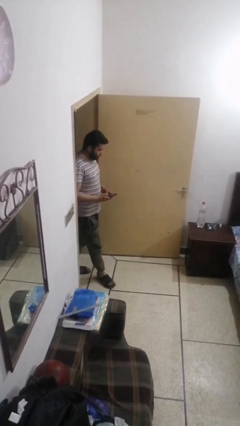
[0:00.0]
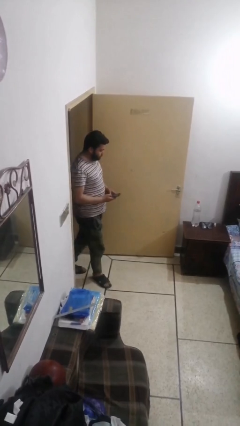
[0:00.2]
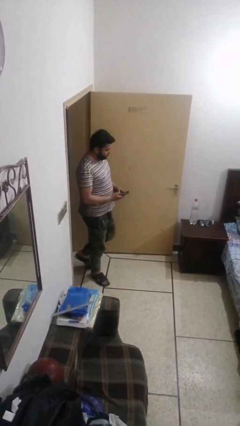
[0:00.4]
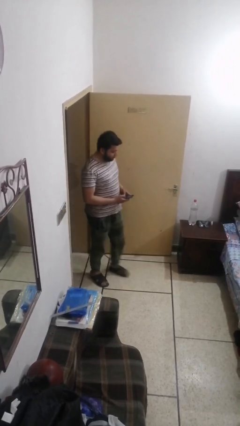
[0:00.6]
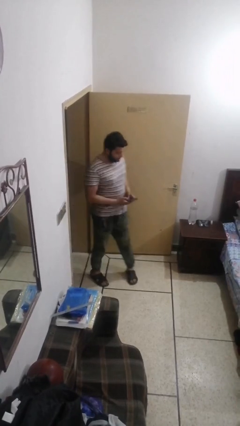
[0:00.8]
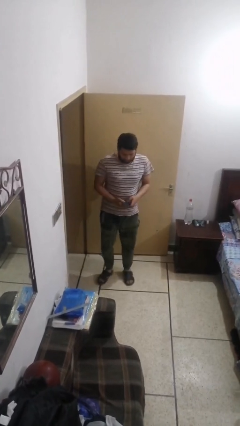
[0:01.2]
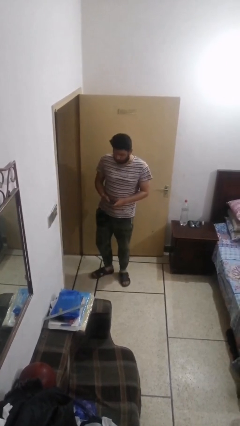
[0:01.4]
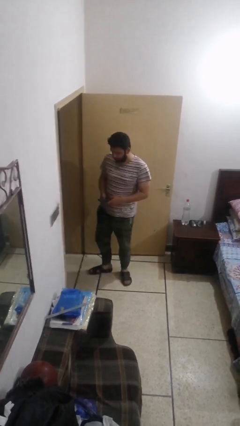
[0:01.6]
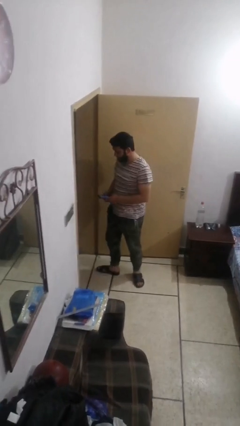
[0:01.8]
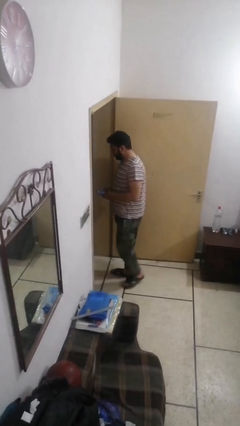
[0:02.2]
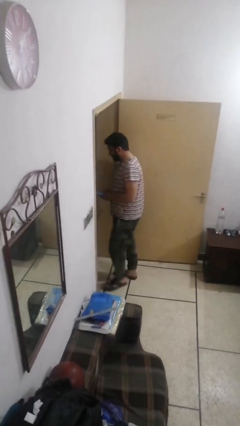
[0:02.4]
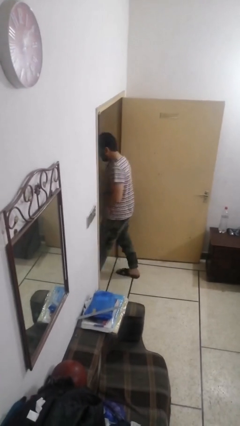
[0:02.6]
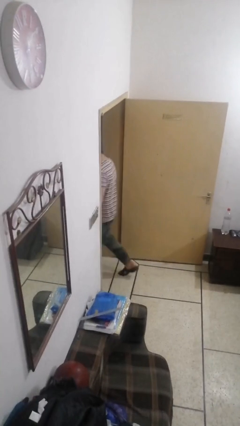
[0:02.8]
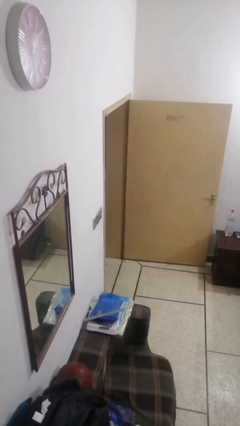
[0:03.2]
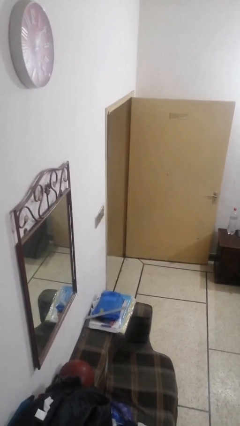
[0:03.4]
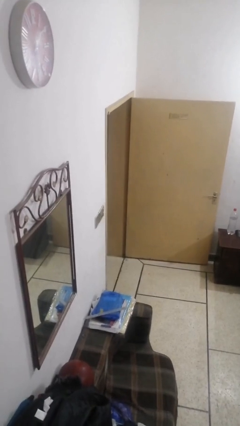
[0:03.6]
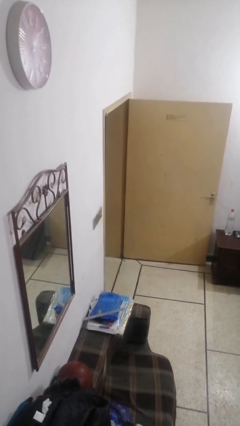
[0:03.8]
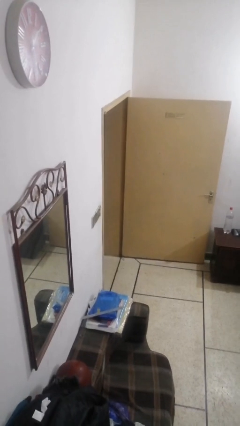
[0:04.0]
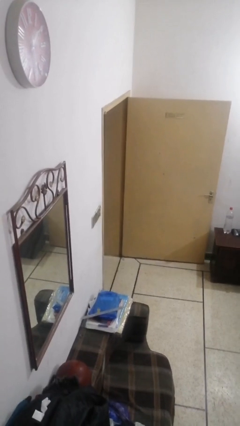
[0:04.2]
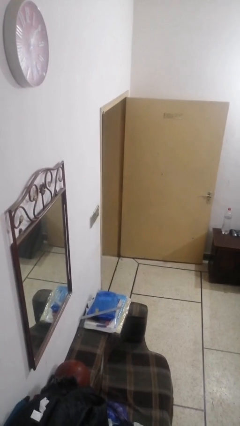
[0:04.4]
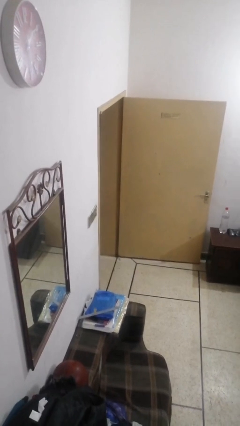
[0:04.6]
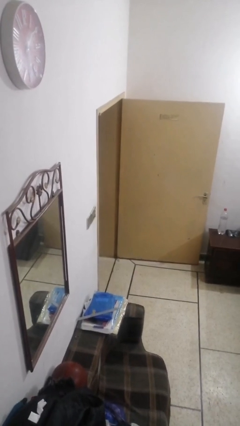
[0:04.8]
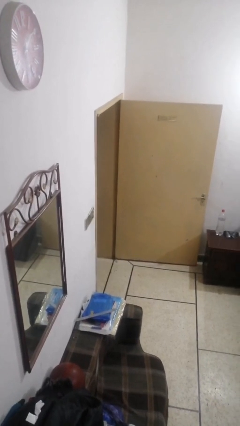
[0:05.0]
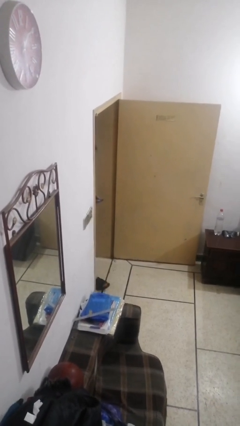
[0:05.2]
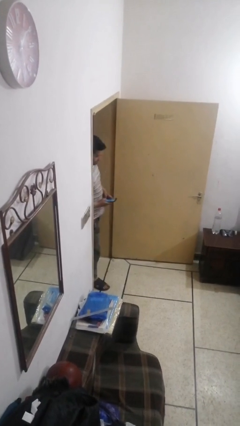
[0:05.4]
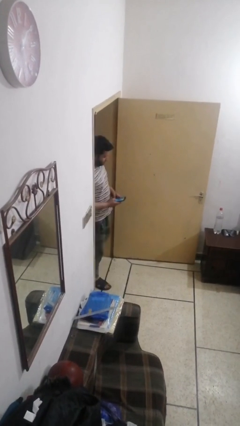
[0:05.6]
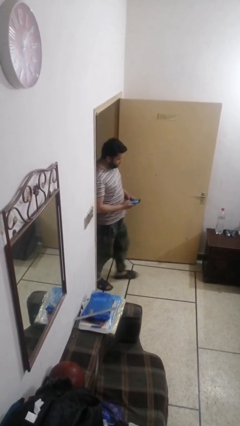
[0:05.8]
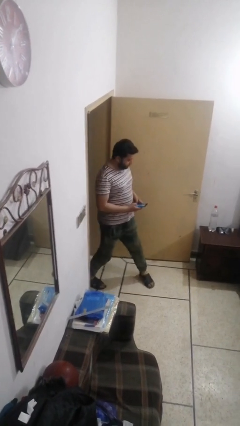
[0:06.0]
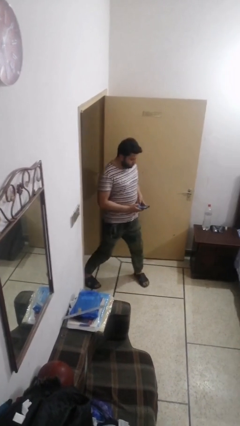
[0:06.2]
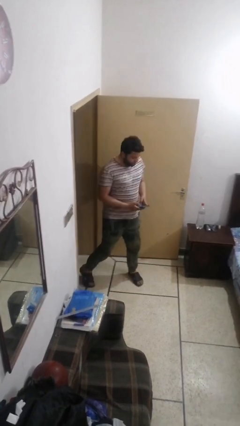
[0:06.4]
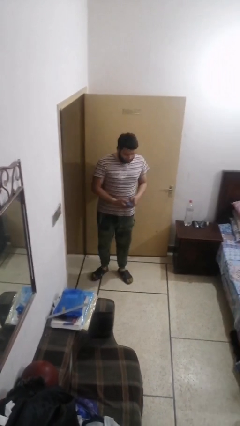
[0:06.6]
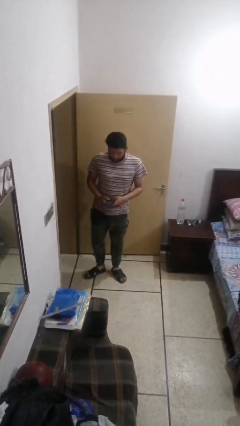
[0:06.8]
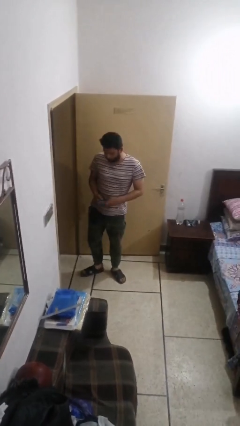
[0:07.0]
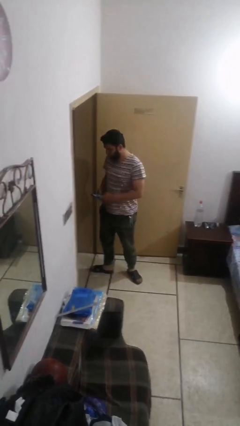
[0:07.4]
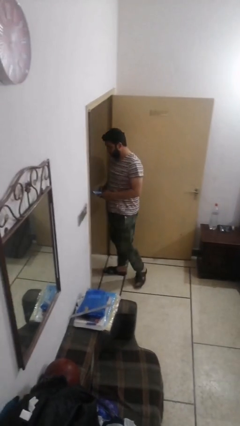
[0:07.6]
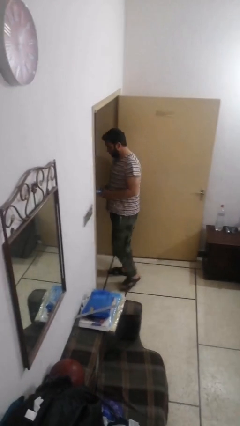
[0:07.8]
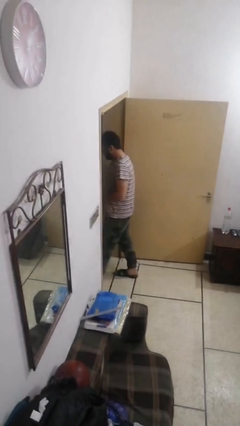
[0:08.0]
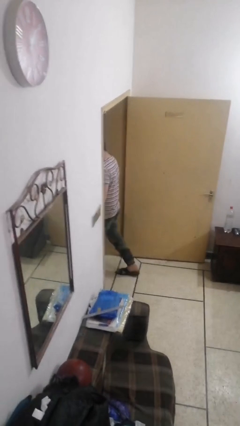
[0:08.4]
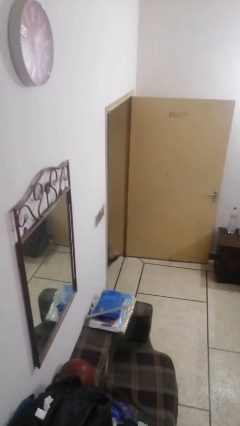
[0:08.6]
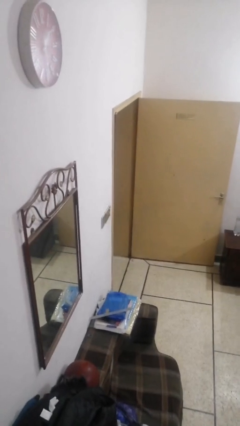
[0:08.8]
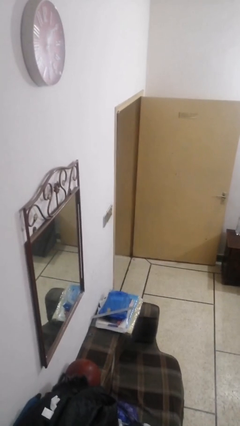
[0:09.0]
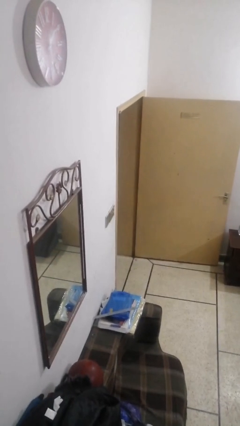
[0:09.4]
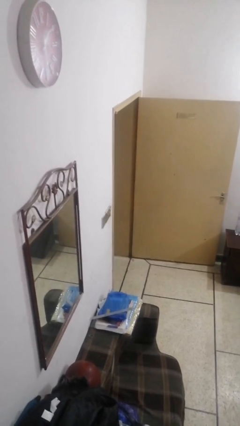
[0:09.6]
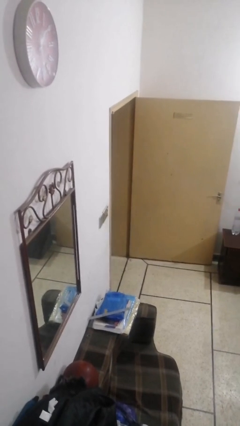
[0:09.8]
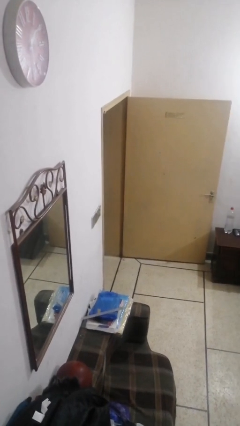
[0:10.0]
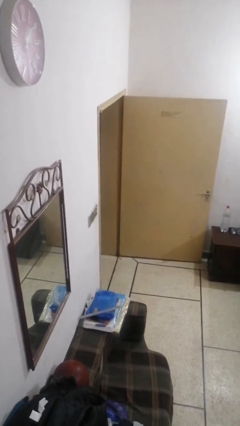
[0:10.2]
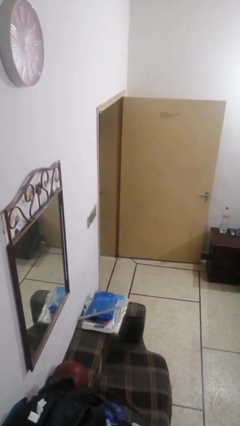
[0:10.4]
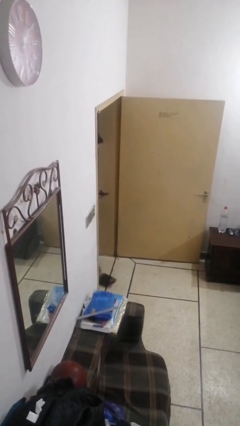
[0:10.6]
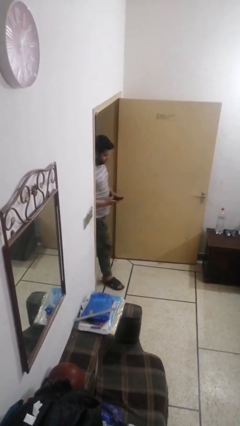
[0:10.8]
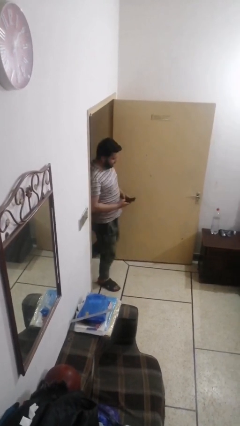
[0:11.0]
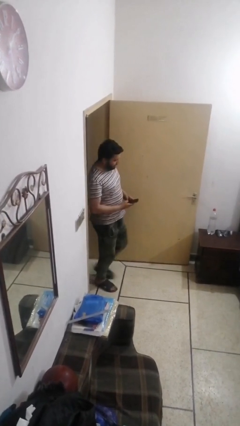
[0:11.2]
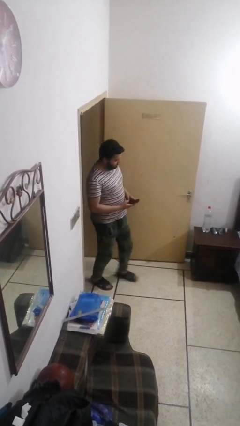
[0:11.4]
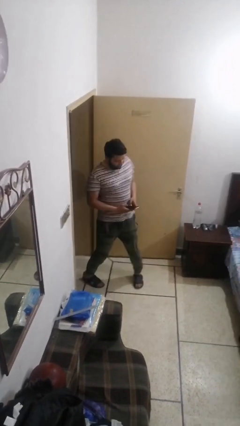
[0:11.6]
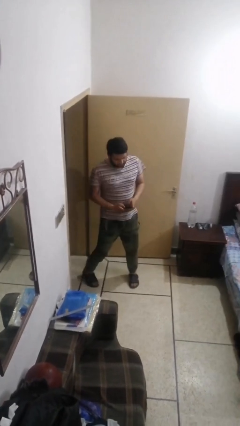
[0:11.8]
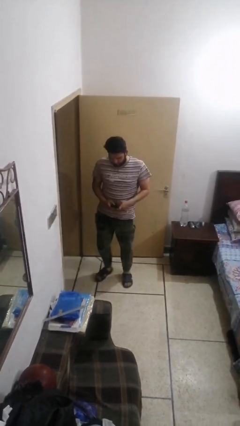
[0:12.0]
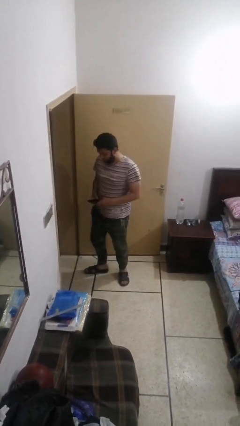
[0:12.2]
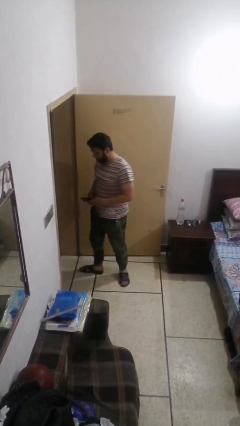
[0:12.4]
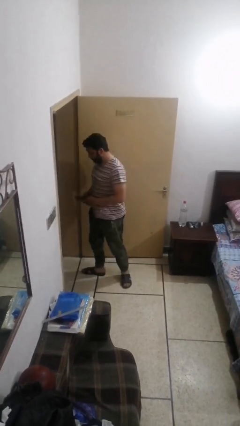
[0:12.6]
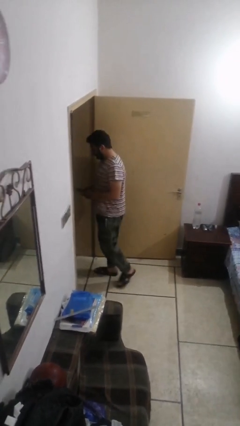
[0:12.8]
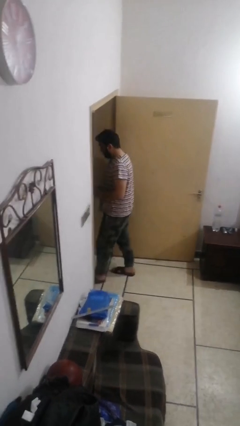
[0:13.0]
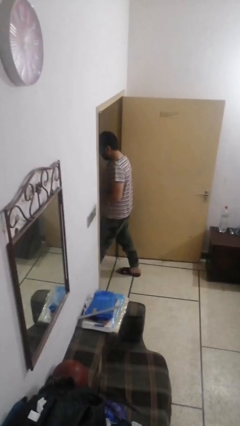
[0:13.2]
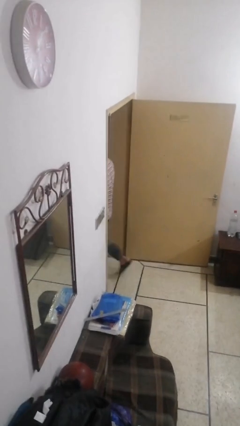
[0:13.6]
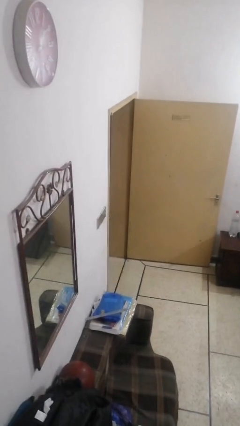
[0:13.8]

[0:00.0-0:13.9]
person texts on phone

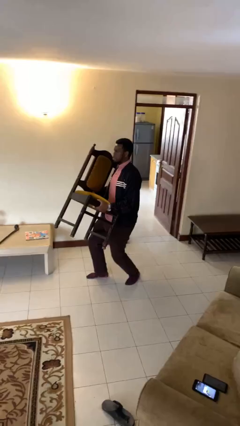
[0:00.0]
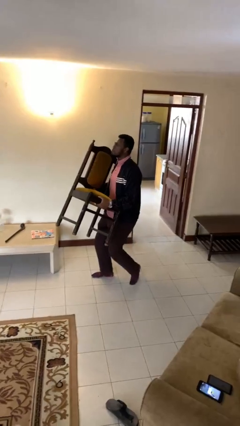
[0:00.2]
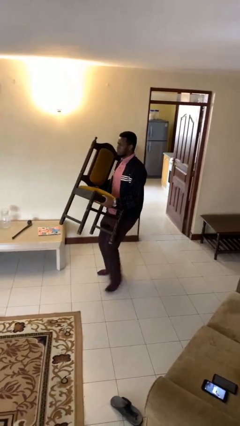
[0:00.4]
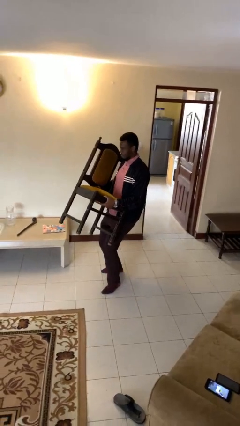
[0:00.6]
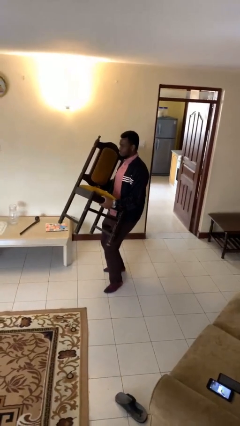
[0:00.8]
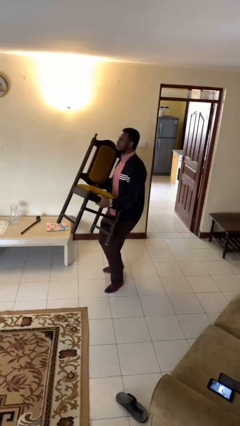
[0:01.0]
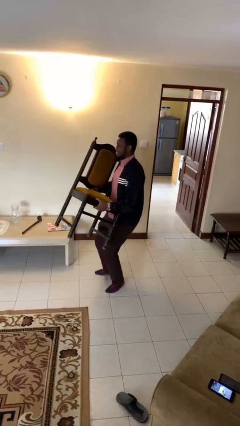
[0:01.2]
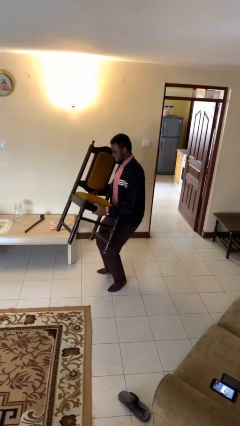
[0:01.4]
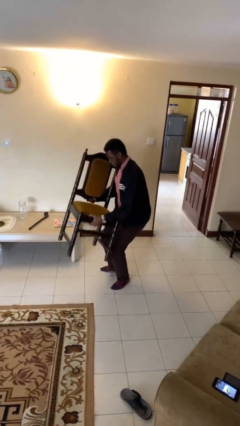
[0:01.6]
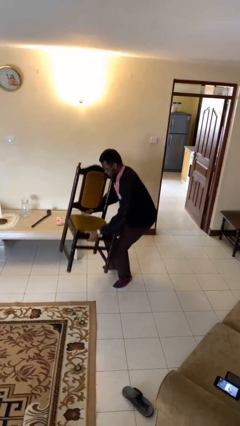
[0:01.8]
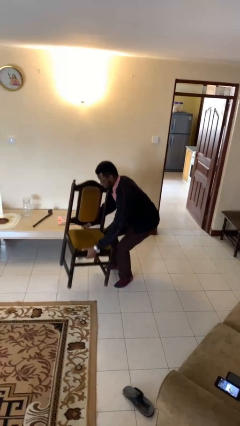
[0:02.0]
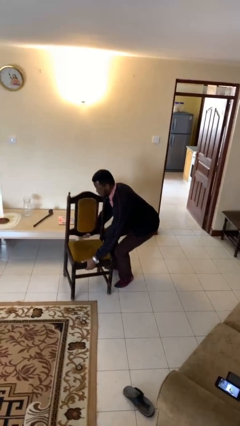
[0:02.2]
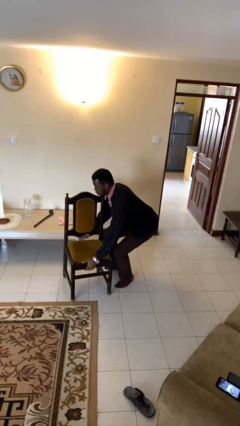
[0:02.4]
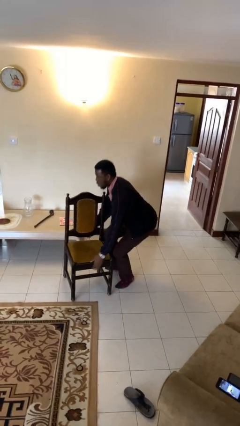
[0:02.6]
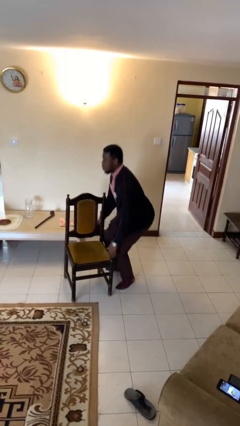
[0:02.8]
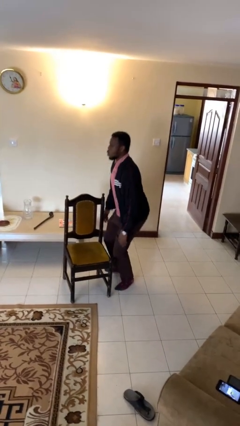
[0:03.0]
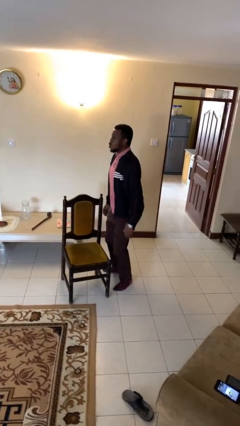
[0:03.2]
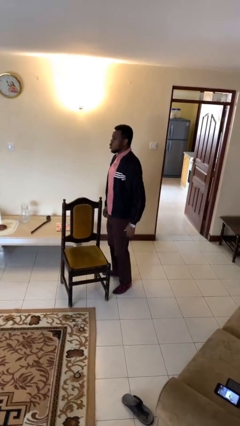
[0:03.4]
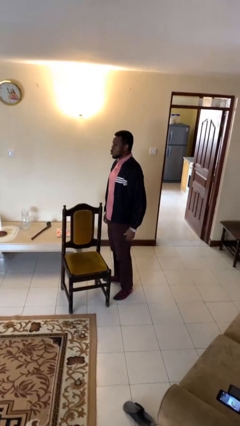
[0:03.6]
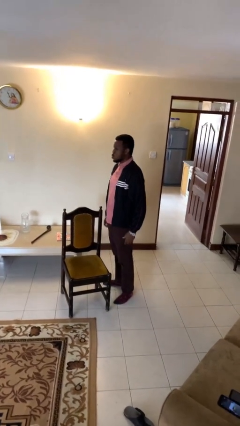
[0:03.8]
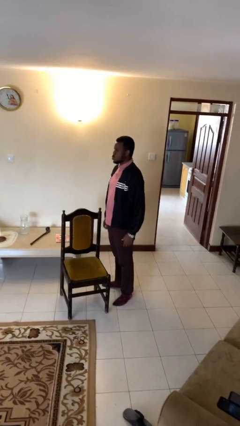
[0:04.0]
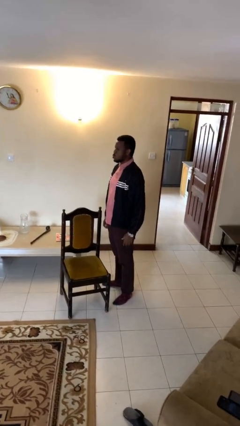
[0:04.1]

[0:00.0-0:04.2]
person puts down object on floor

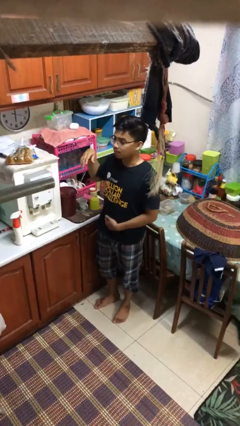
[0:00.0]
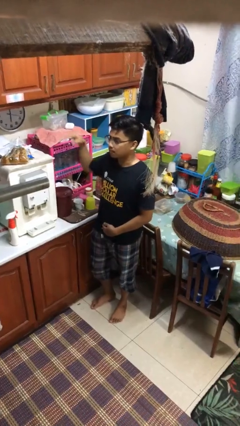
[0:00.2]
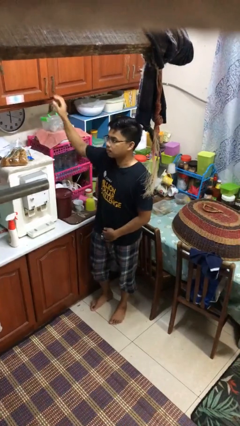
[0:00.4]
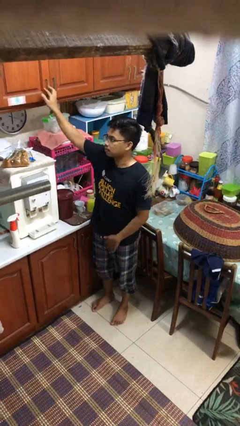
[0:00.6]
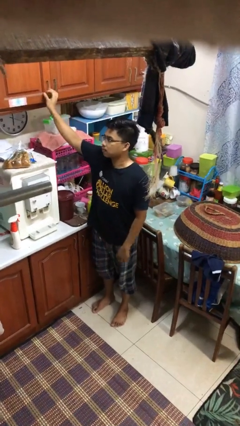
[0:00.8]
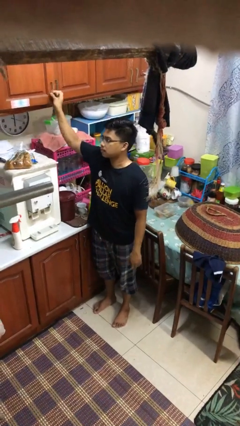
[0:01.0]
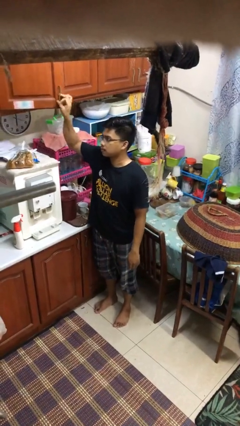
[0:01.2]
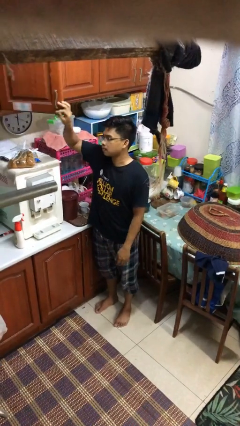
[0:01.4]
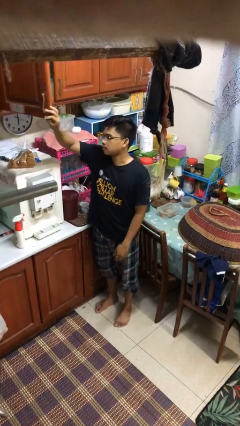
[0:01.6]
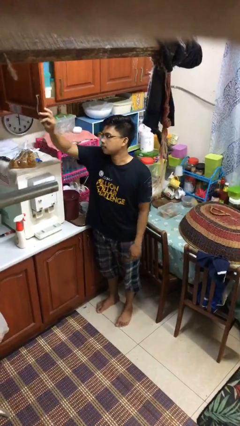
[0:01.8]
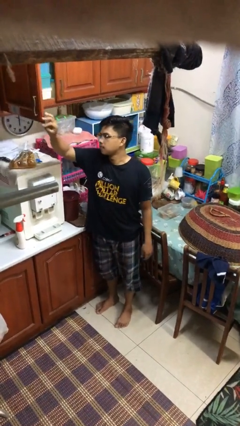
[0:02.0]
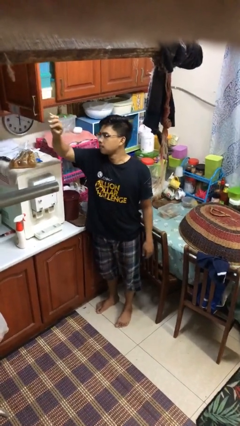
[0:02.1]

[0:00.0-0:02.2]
person opens kitchen drawer
